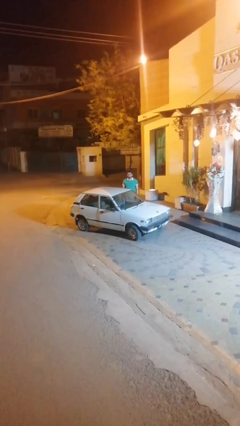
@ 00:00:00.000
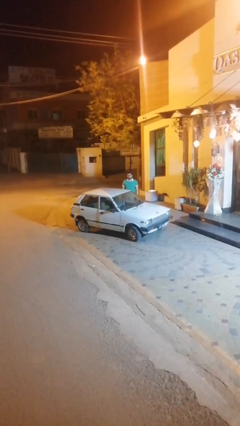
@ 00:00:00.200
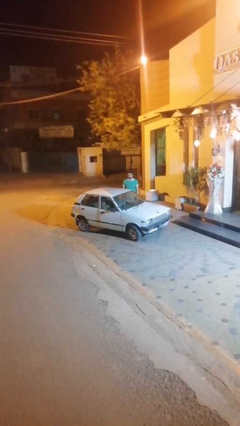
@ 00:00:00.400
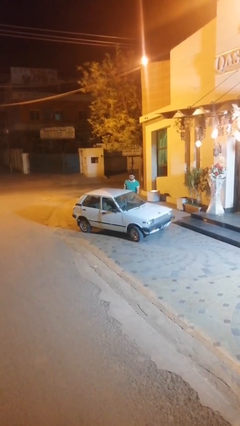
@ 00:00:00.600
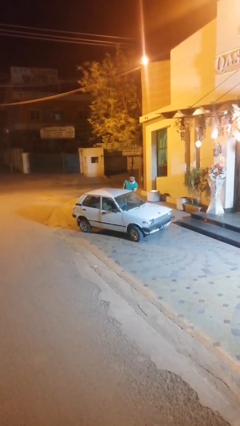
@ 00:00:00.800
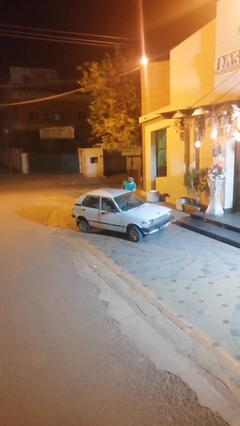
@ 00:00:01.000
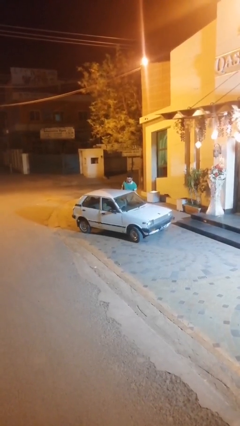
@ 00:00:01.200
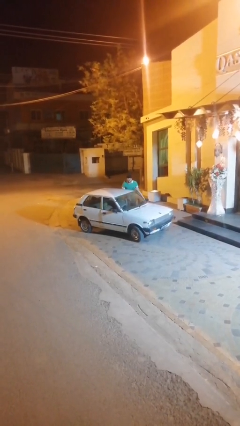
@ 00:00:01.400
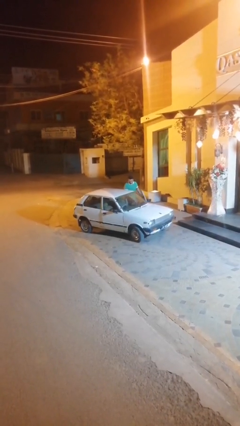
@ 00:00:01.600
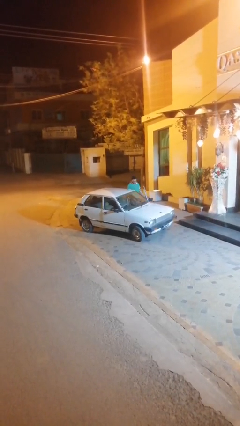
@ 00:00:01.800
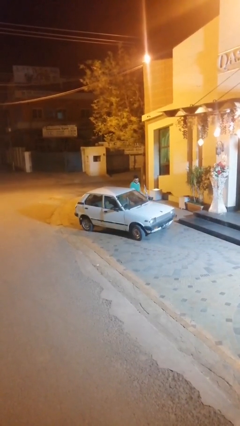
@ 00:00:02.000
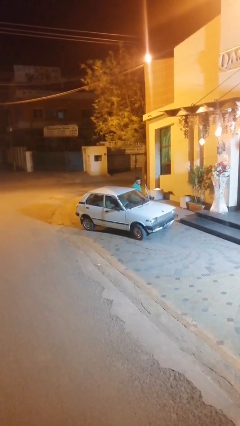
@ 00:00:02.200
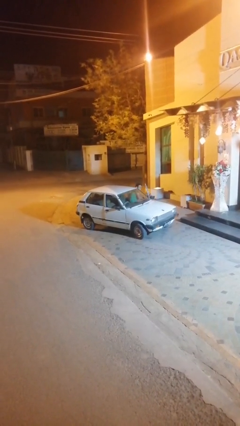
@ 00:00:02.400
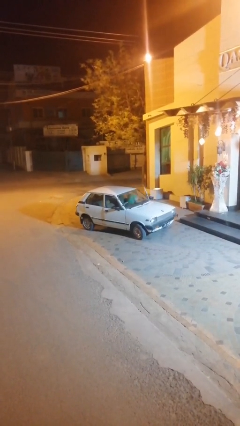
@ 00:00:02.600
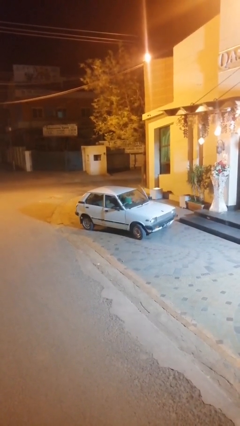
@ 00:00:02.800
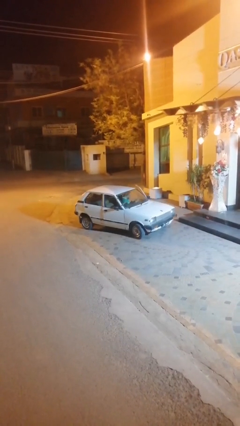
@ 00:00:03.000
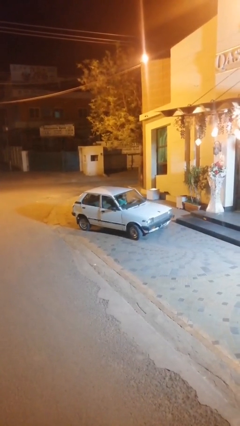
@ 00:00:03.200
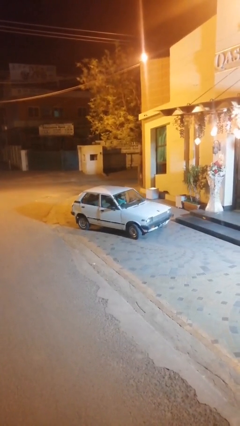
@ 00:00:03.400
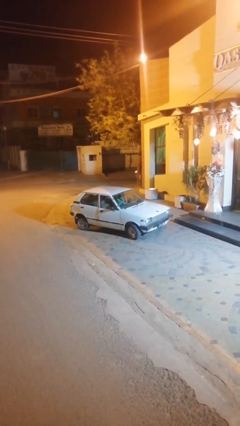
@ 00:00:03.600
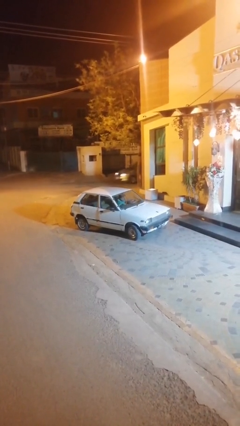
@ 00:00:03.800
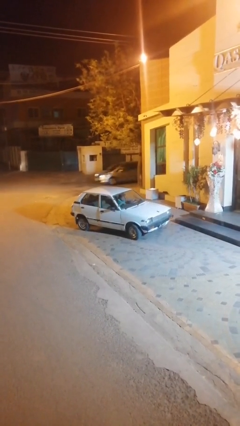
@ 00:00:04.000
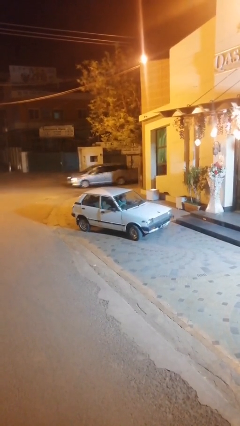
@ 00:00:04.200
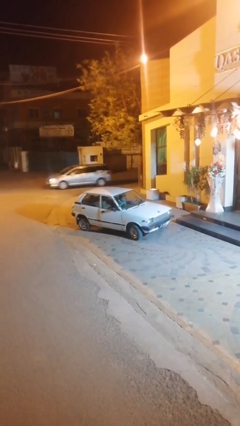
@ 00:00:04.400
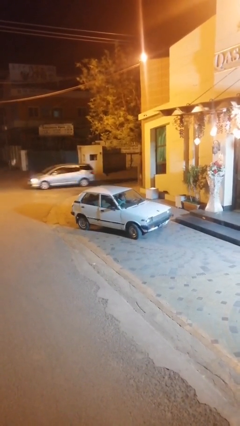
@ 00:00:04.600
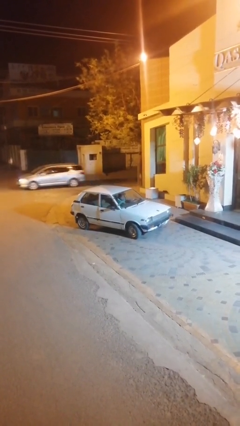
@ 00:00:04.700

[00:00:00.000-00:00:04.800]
car picks up person

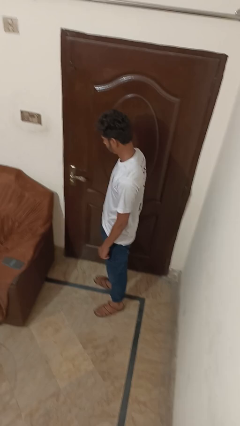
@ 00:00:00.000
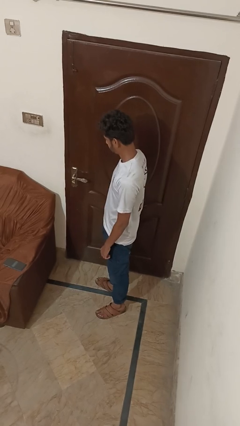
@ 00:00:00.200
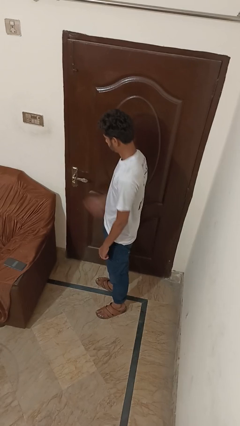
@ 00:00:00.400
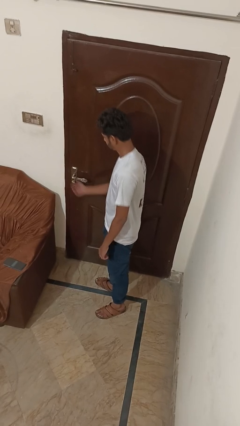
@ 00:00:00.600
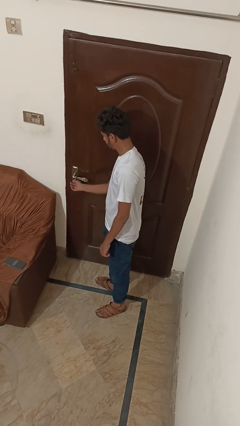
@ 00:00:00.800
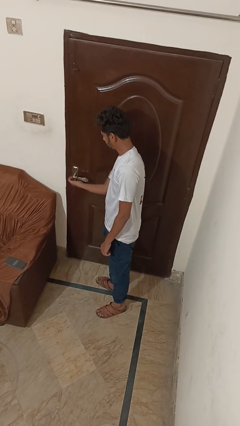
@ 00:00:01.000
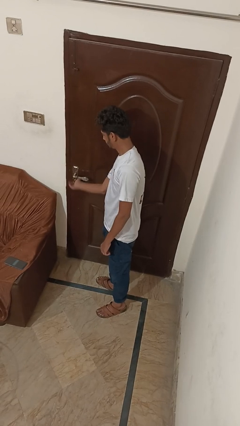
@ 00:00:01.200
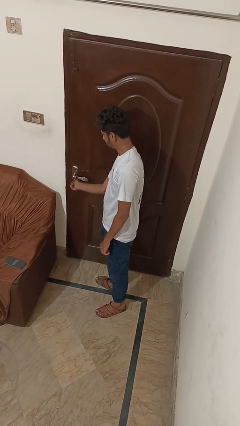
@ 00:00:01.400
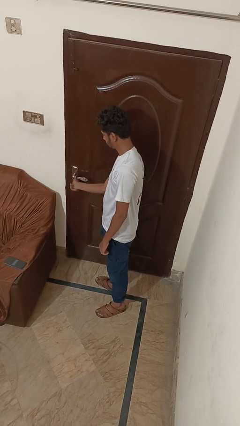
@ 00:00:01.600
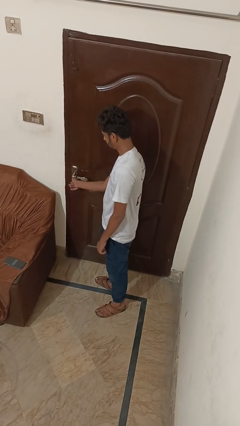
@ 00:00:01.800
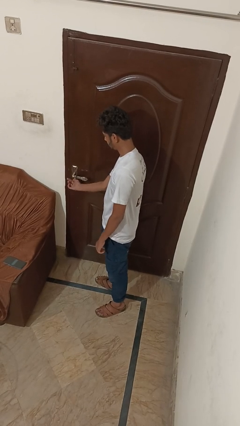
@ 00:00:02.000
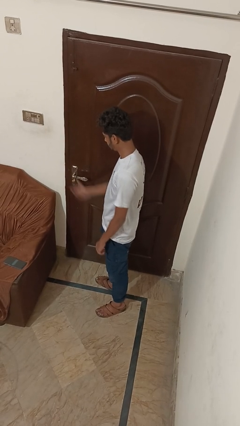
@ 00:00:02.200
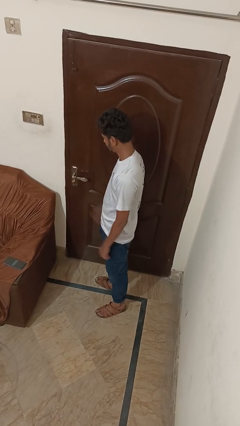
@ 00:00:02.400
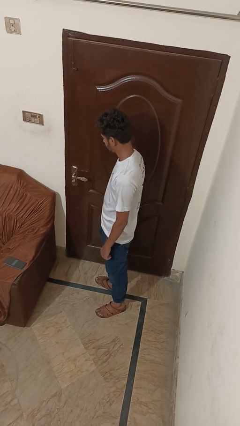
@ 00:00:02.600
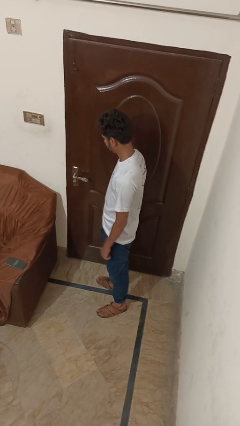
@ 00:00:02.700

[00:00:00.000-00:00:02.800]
person unlocks door with keys

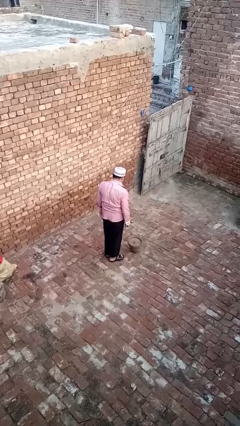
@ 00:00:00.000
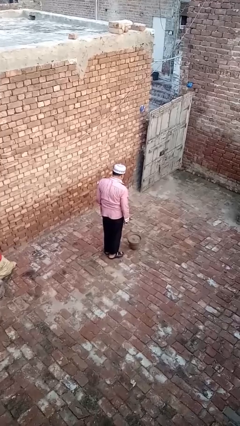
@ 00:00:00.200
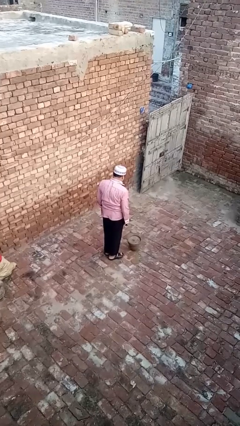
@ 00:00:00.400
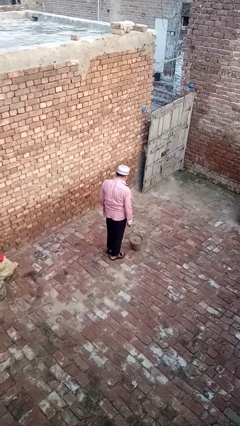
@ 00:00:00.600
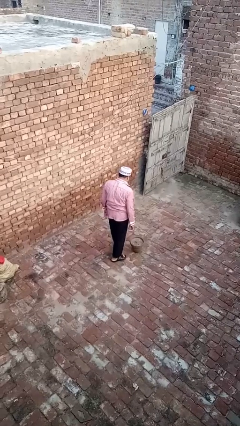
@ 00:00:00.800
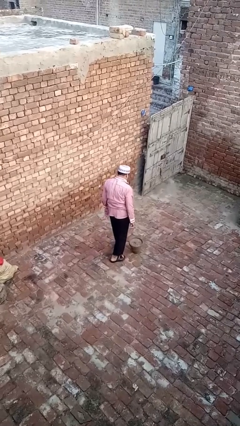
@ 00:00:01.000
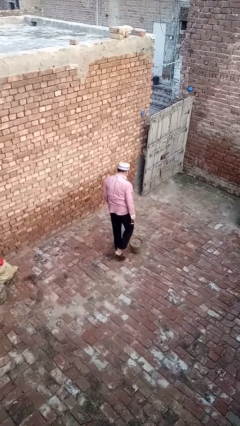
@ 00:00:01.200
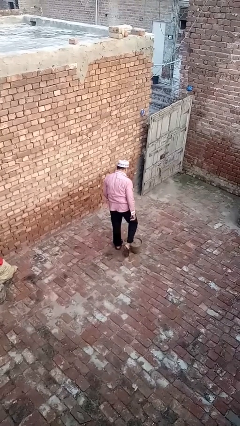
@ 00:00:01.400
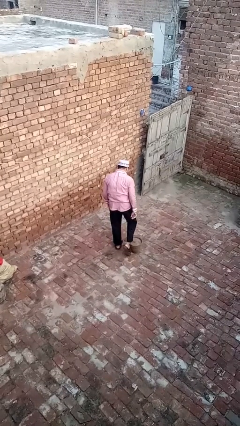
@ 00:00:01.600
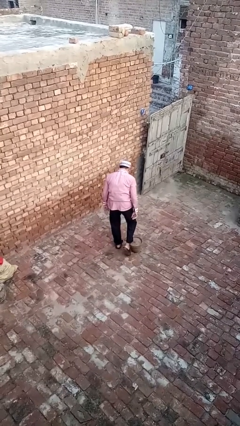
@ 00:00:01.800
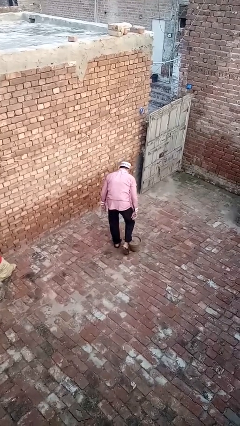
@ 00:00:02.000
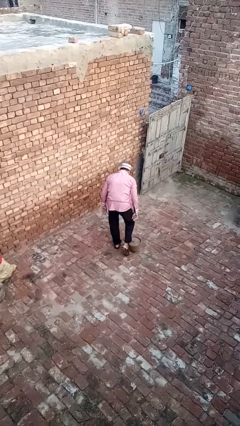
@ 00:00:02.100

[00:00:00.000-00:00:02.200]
person trips on object on floor

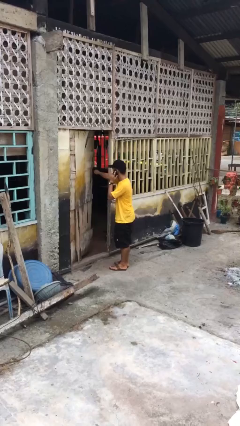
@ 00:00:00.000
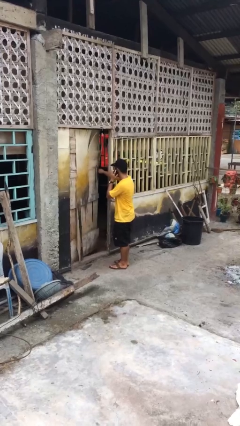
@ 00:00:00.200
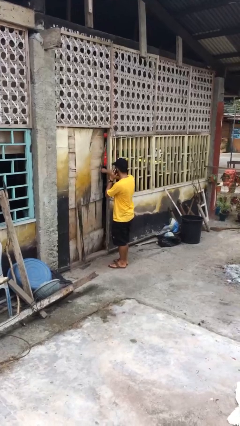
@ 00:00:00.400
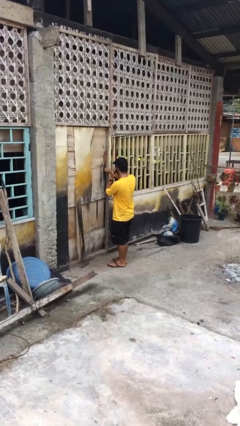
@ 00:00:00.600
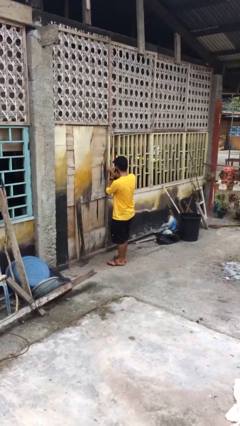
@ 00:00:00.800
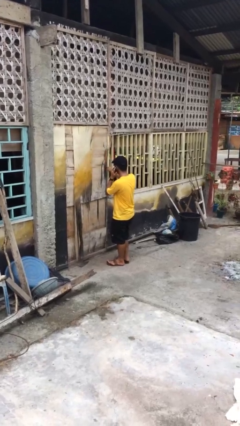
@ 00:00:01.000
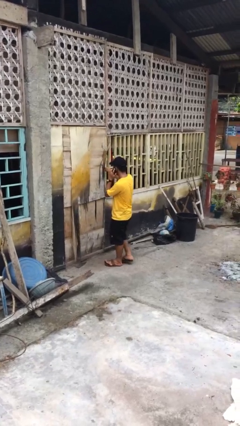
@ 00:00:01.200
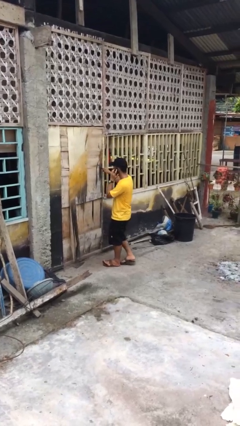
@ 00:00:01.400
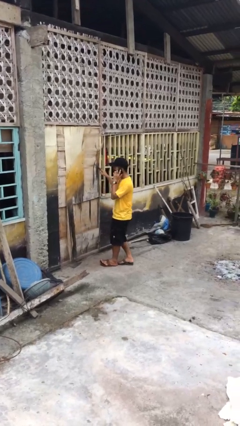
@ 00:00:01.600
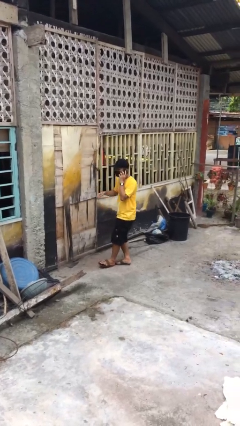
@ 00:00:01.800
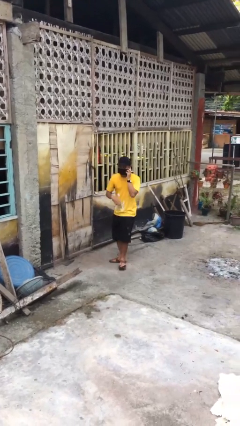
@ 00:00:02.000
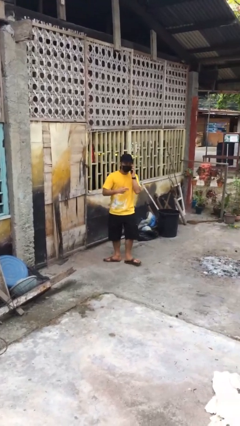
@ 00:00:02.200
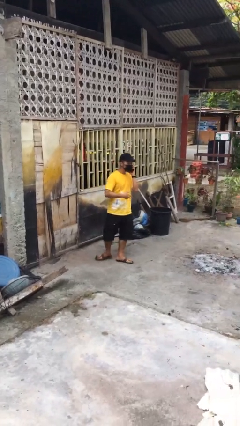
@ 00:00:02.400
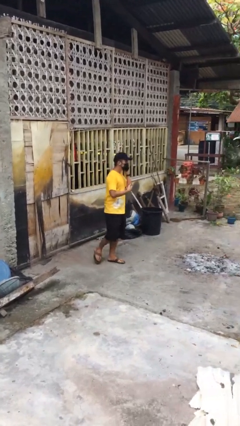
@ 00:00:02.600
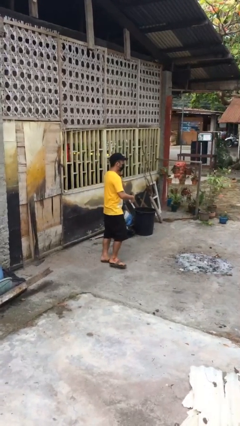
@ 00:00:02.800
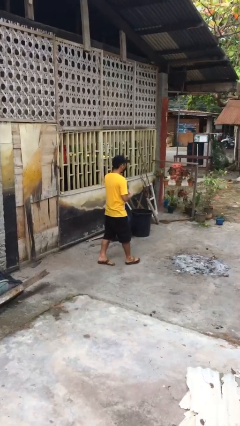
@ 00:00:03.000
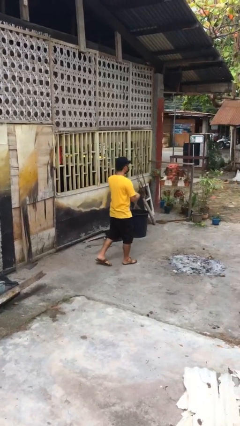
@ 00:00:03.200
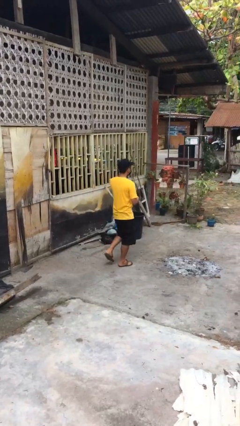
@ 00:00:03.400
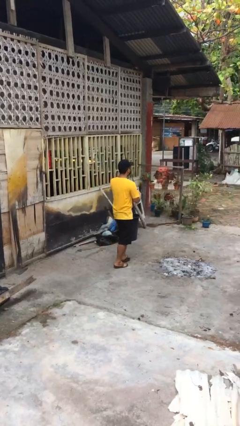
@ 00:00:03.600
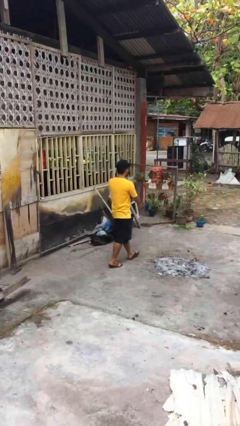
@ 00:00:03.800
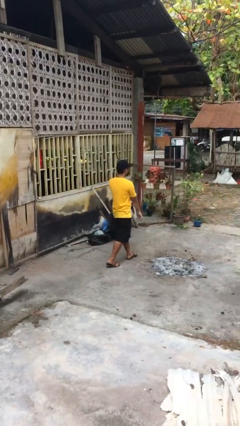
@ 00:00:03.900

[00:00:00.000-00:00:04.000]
person closes facility door

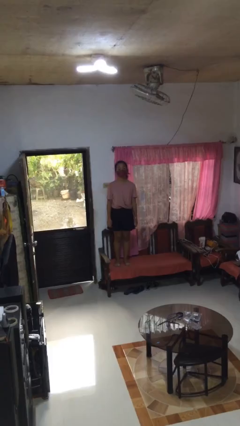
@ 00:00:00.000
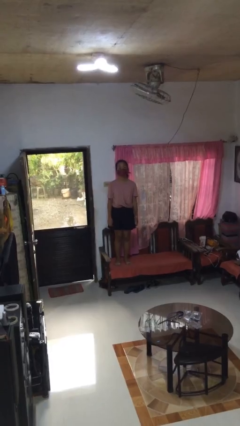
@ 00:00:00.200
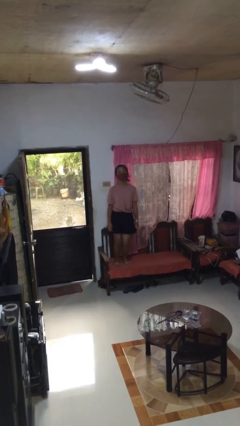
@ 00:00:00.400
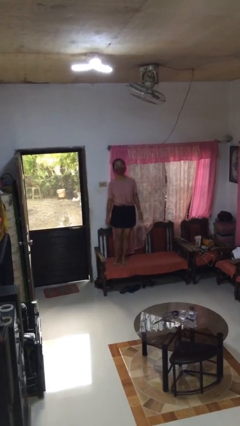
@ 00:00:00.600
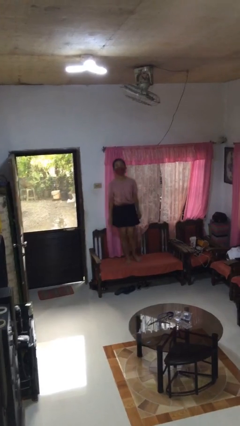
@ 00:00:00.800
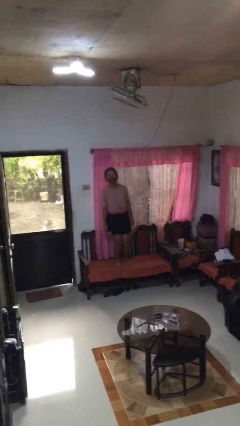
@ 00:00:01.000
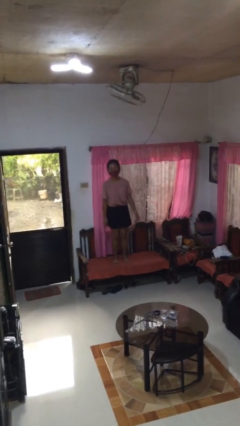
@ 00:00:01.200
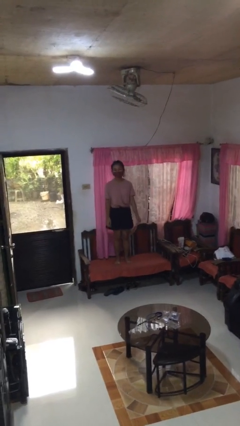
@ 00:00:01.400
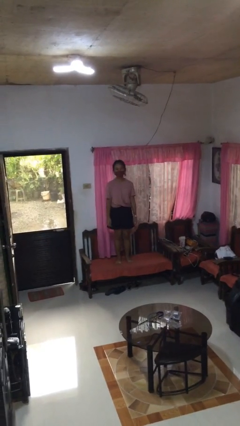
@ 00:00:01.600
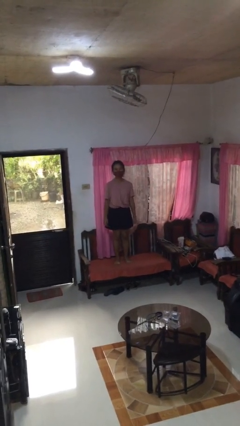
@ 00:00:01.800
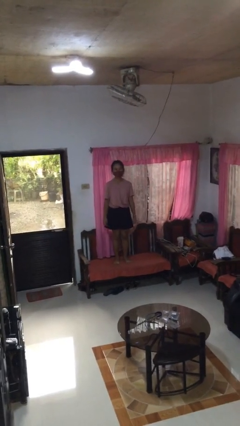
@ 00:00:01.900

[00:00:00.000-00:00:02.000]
person jumps on couch

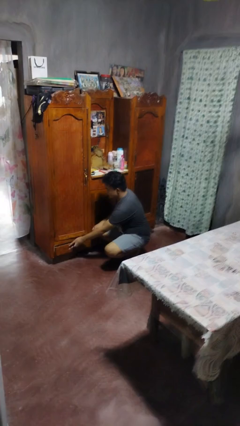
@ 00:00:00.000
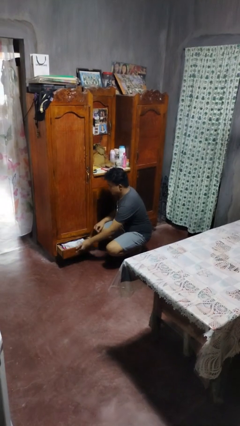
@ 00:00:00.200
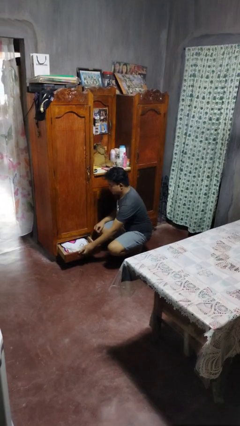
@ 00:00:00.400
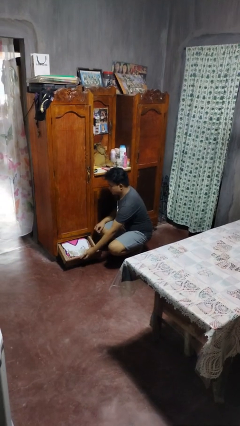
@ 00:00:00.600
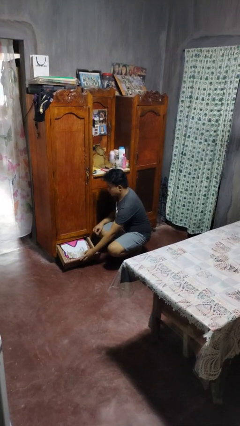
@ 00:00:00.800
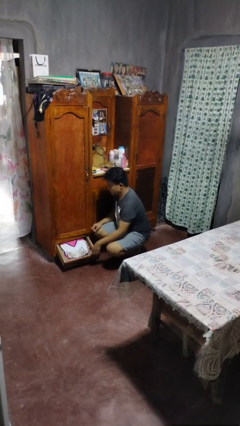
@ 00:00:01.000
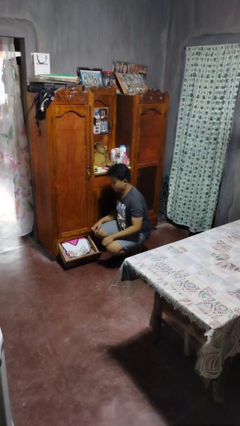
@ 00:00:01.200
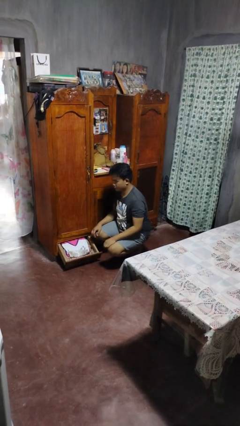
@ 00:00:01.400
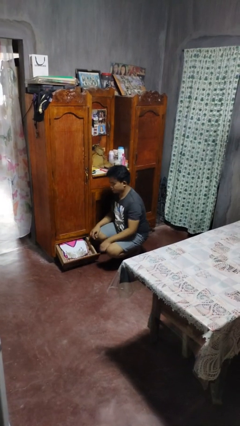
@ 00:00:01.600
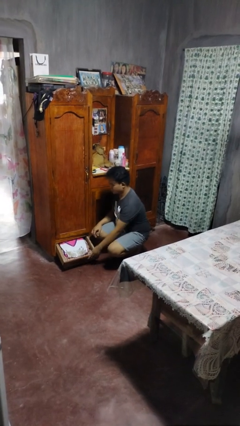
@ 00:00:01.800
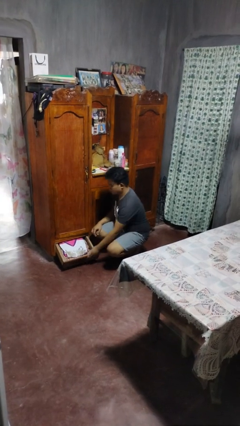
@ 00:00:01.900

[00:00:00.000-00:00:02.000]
person opens dresser drawer
